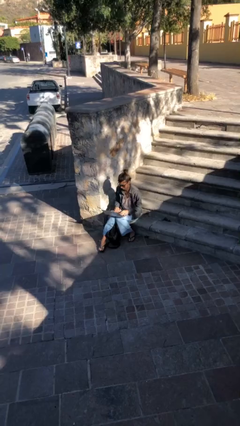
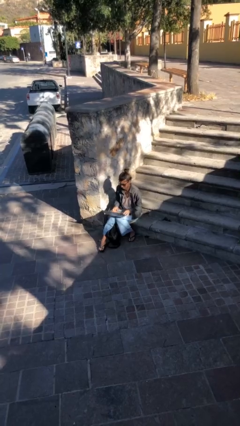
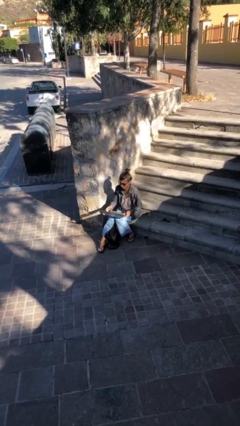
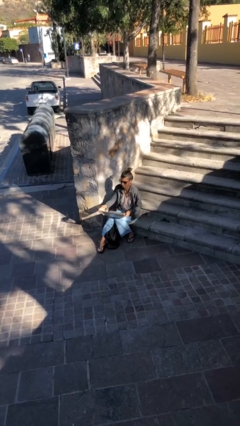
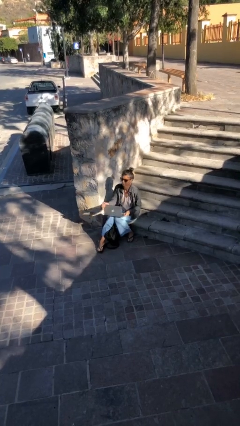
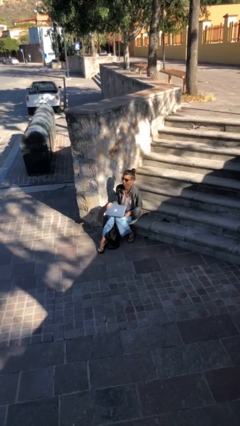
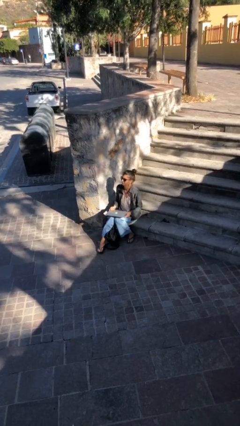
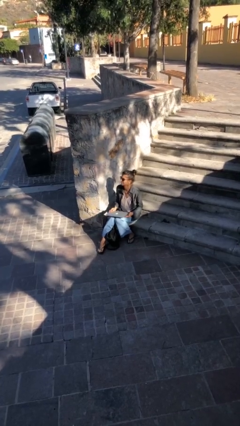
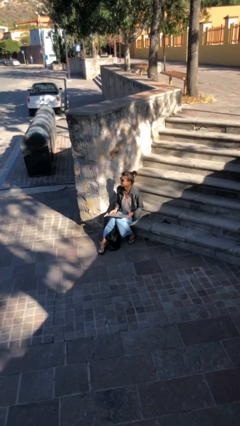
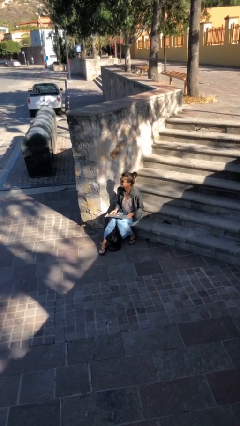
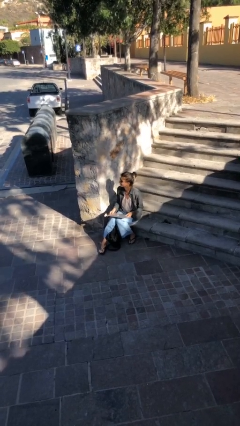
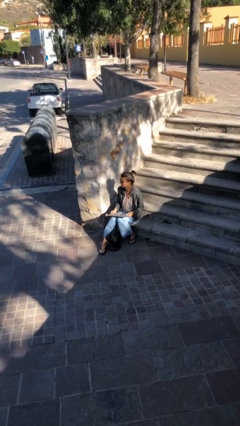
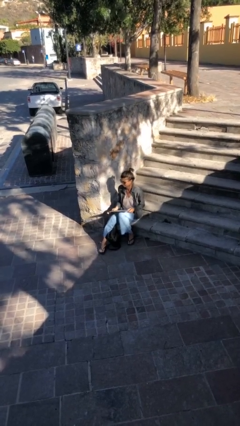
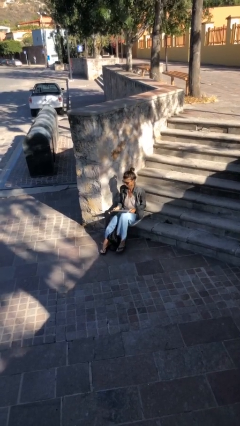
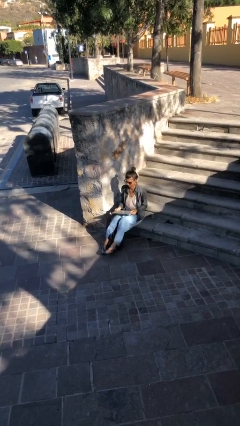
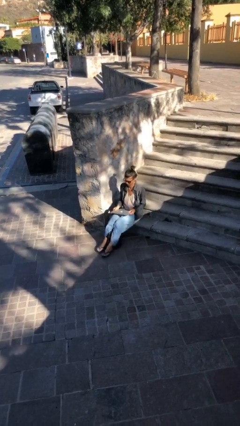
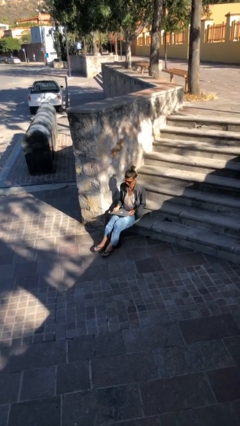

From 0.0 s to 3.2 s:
person interacts with laptop

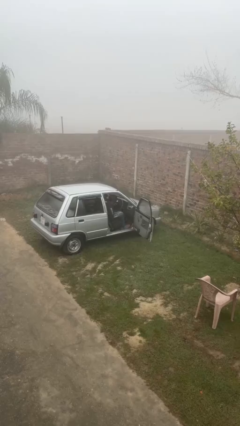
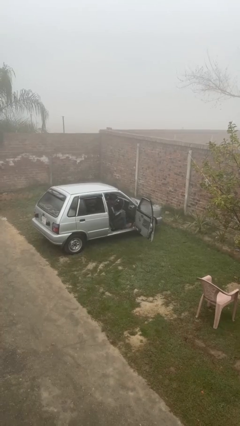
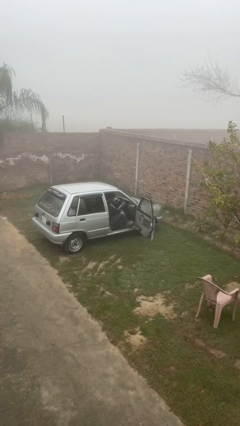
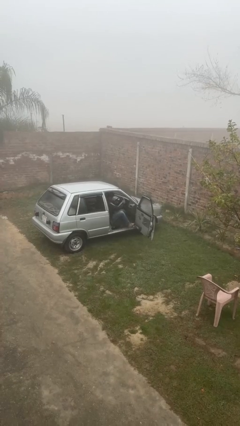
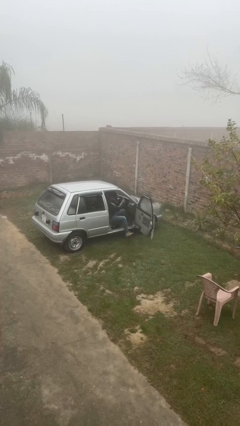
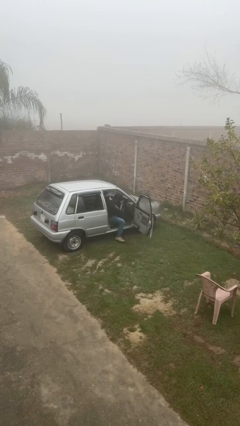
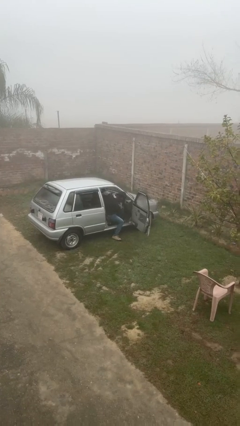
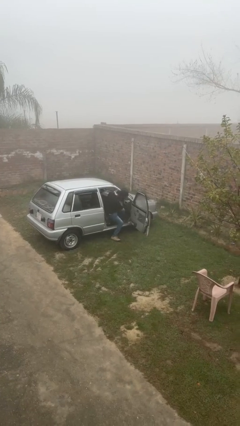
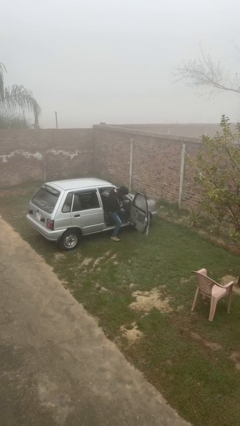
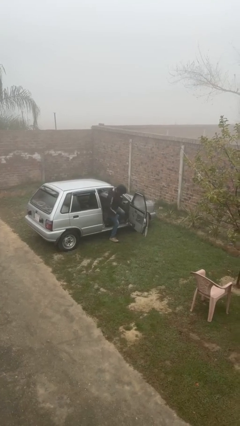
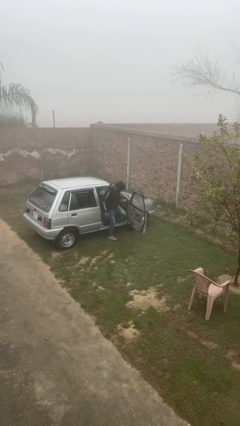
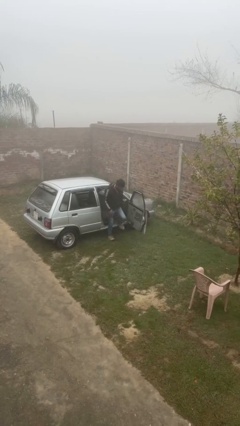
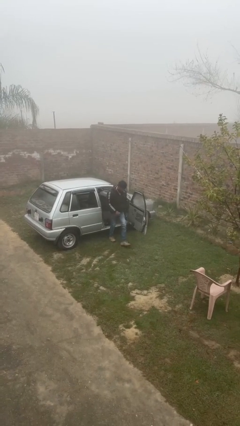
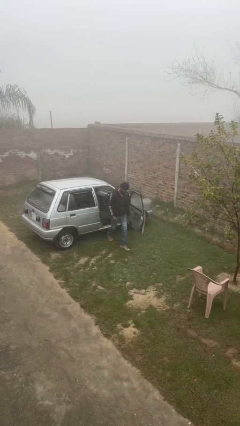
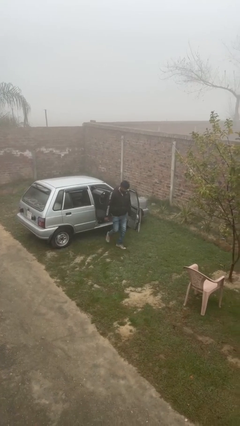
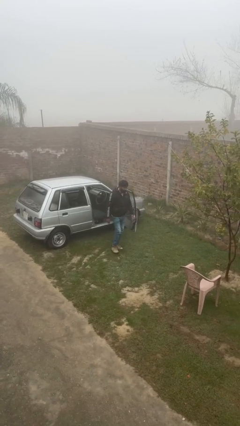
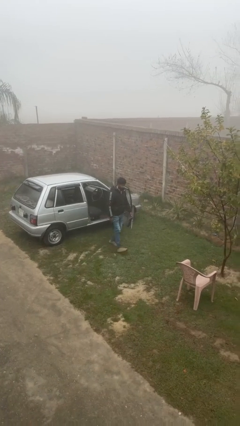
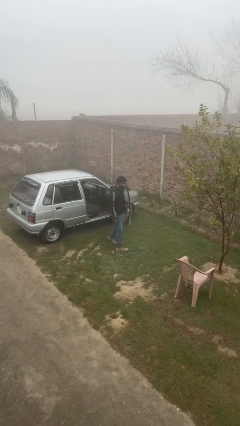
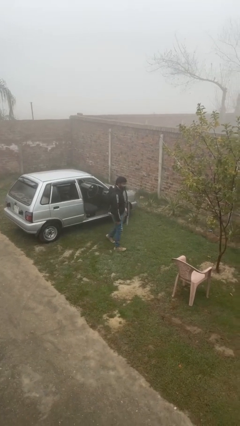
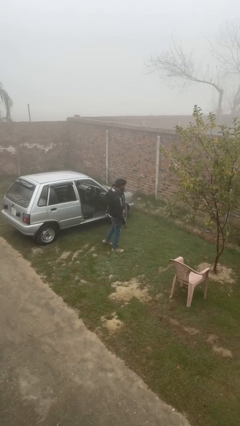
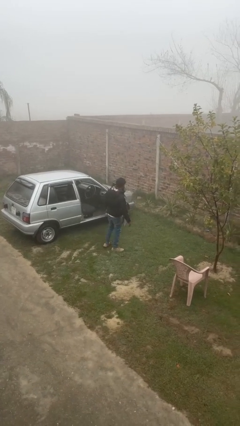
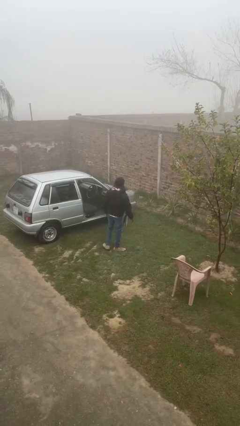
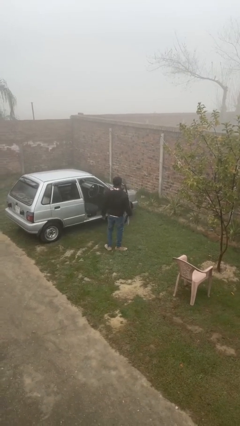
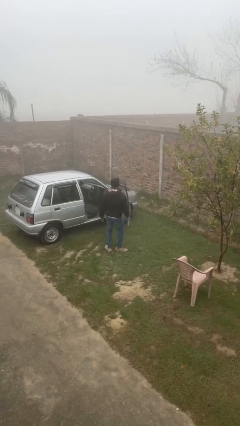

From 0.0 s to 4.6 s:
person exits car

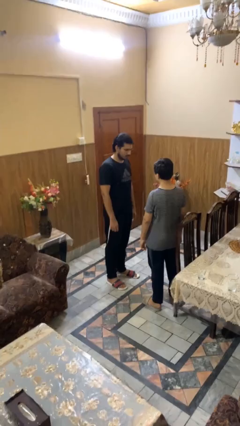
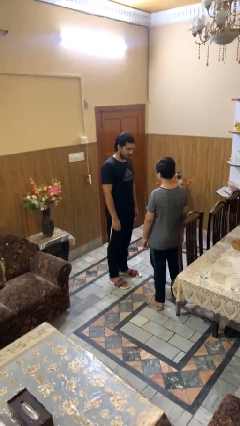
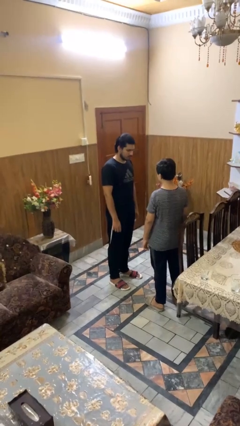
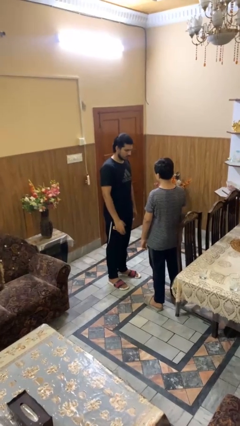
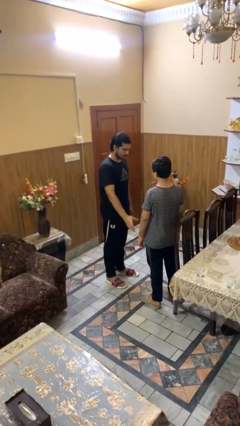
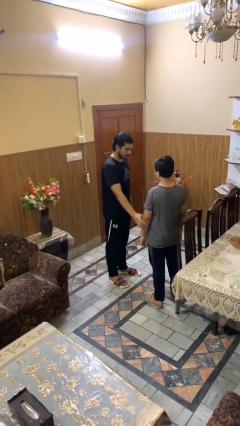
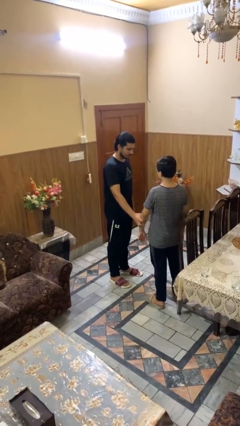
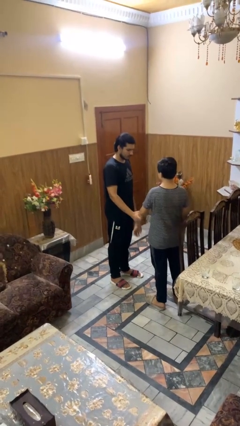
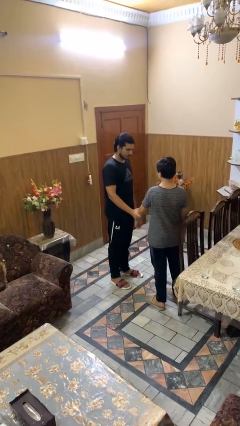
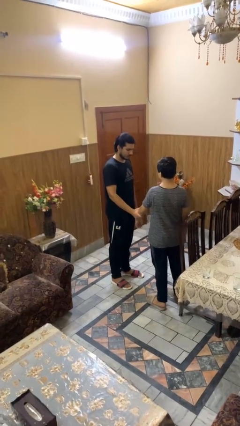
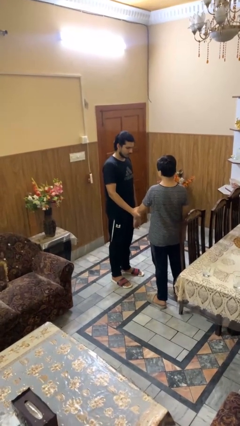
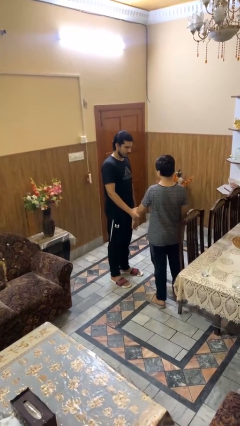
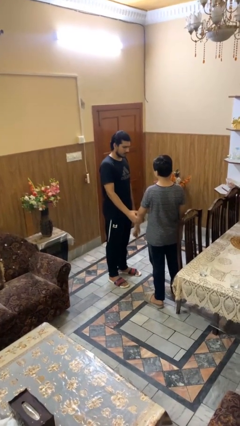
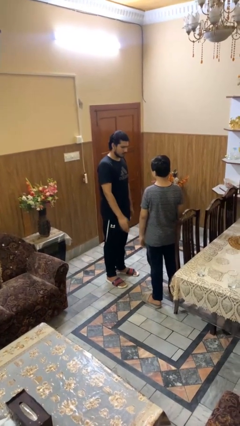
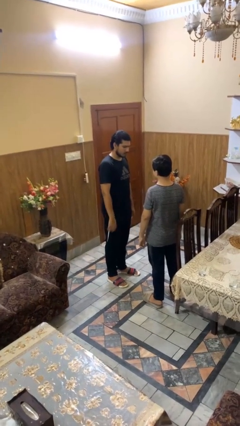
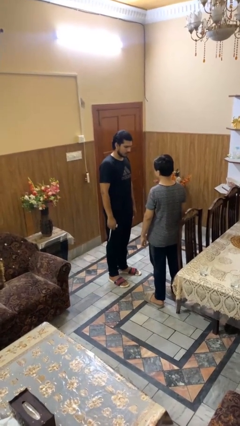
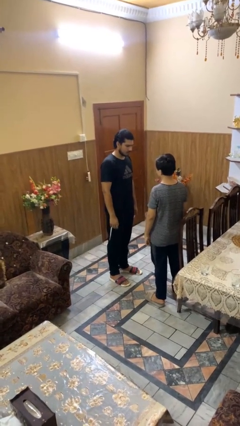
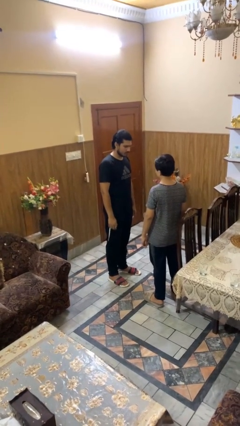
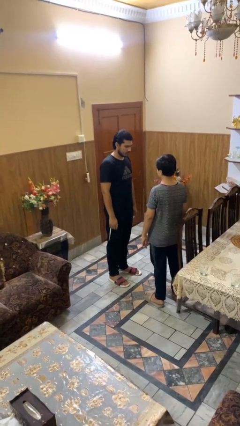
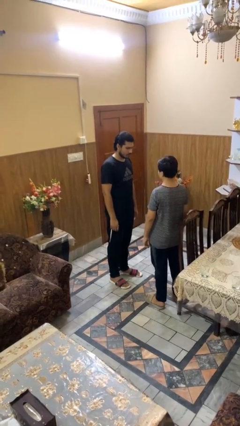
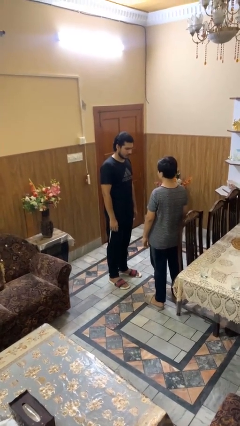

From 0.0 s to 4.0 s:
person grabs person by forearm

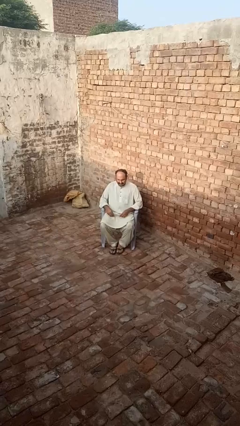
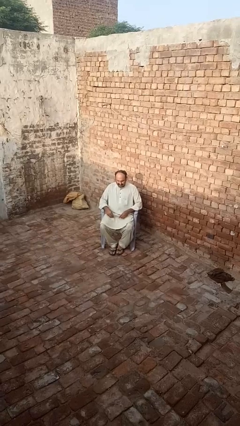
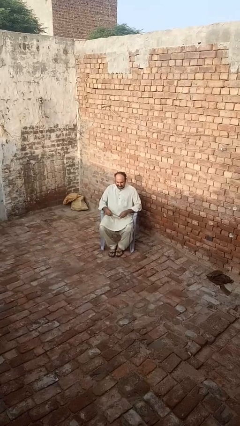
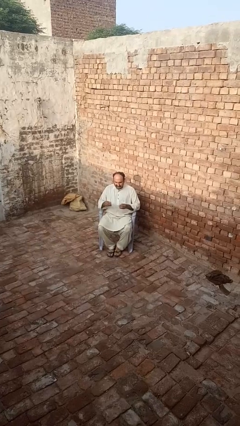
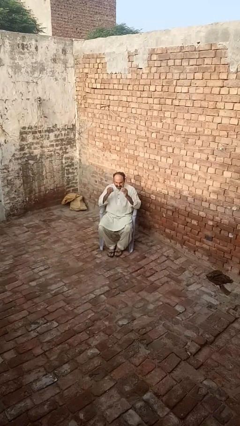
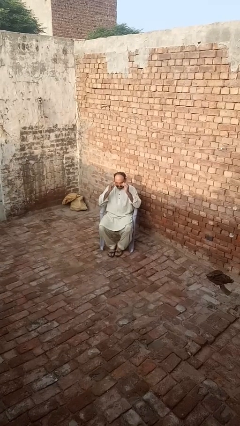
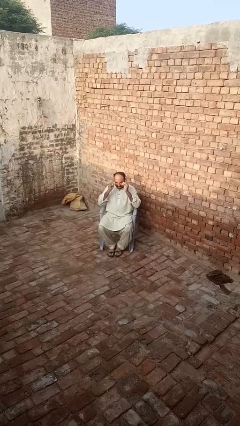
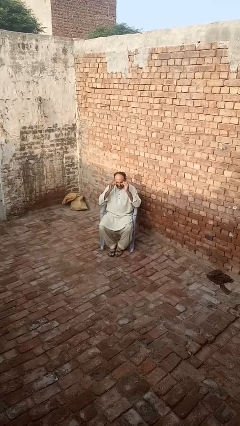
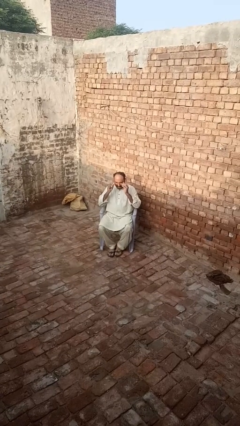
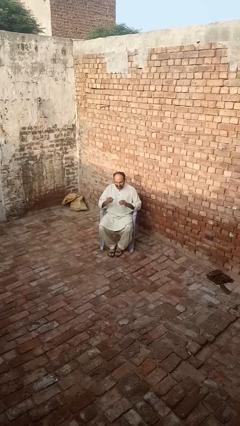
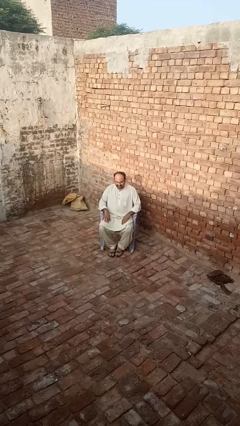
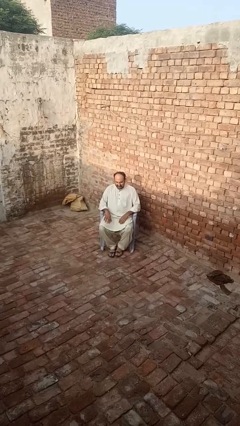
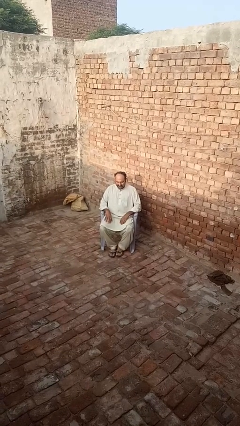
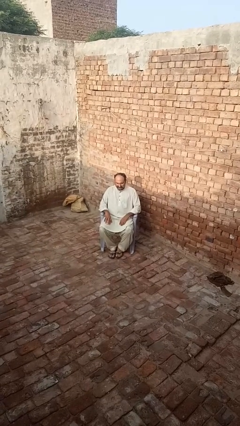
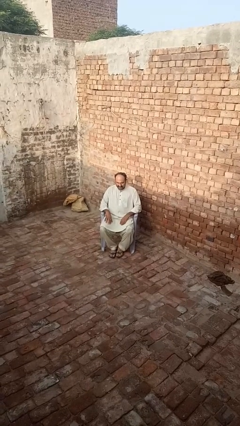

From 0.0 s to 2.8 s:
person puts on glasses

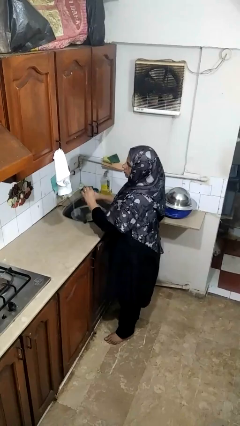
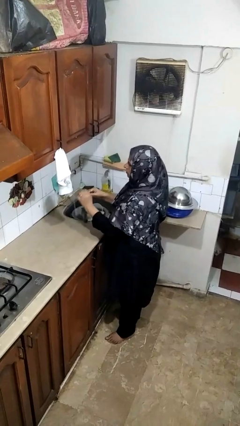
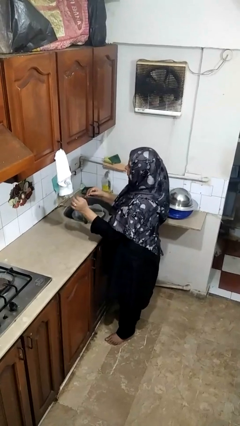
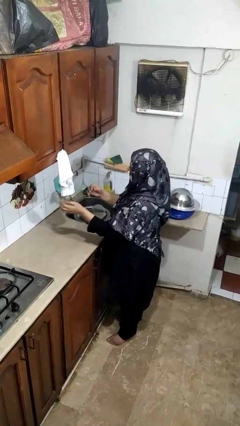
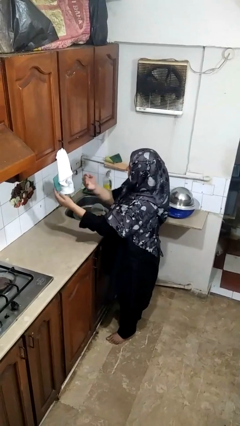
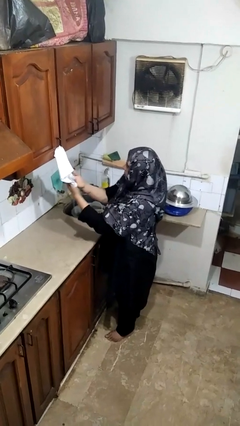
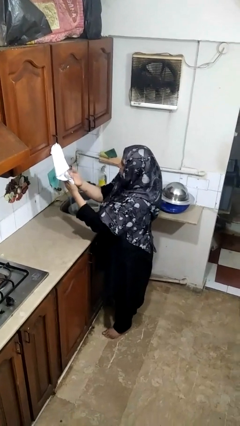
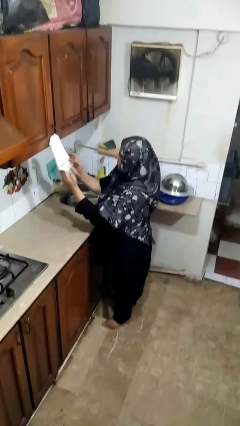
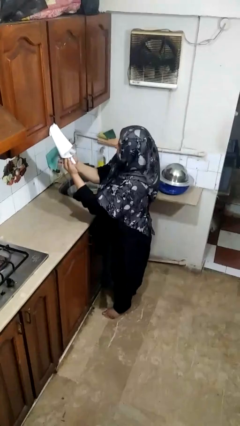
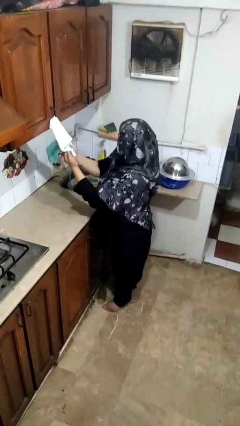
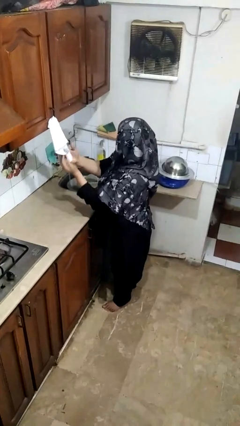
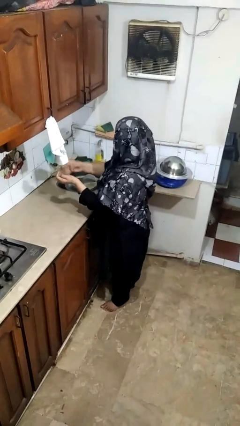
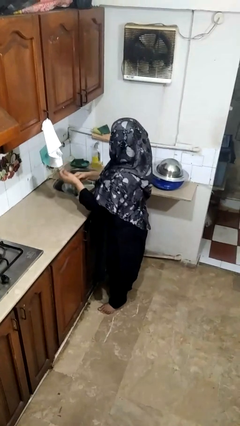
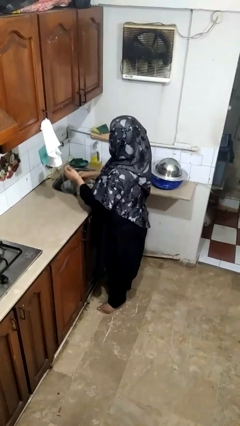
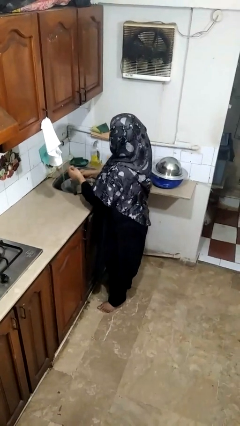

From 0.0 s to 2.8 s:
person dries hands with towel

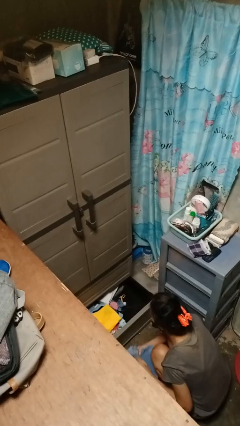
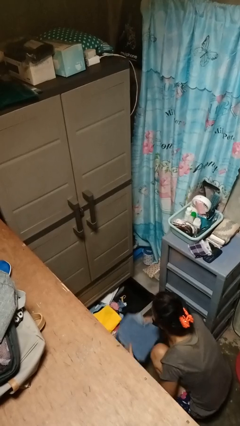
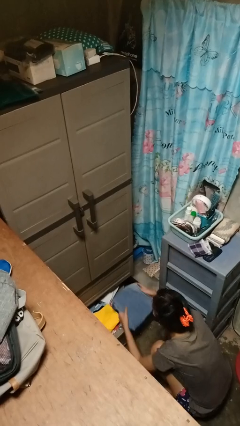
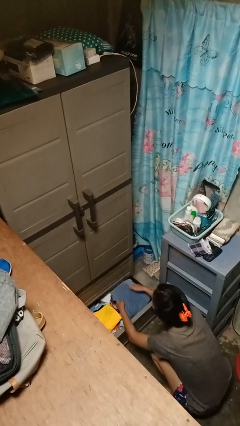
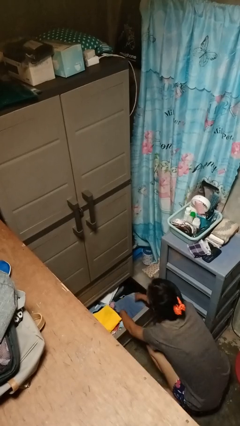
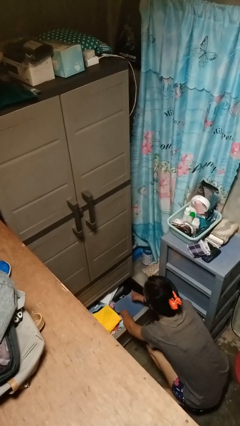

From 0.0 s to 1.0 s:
person puts clothes into dresser
